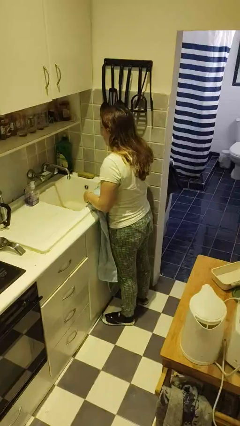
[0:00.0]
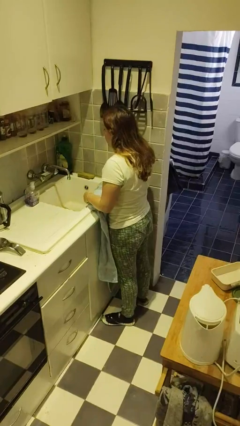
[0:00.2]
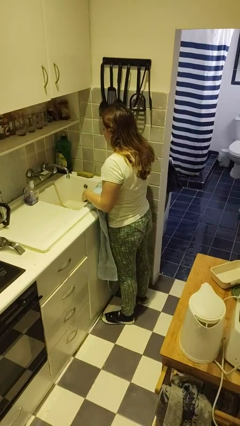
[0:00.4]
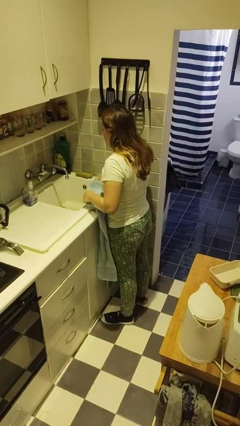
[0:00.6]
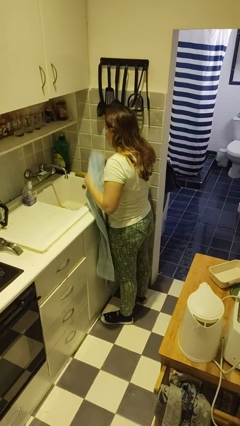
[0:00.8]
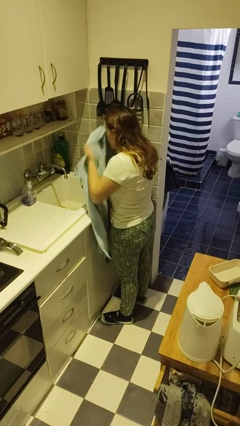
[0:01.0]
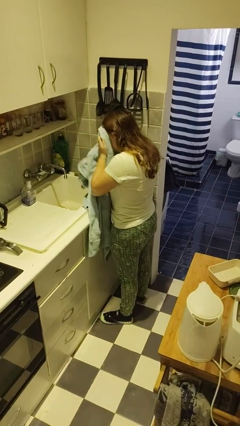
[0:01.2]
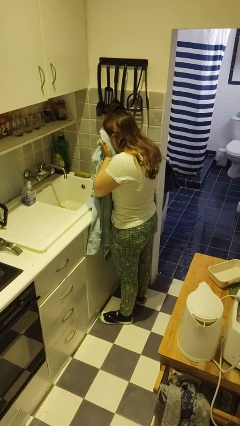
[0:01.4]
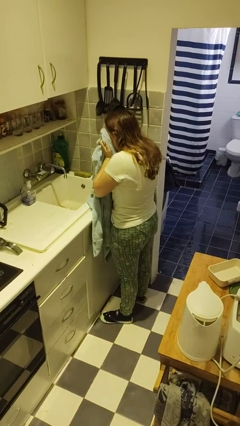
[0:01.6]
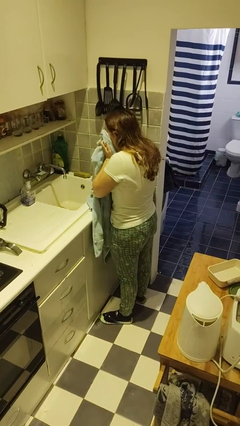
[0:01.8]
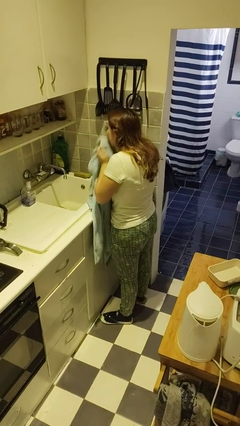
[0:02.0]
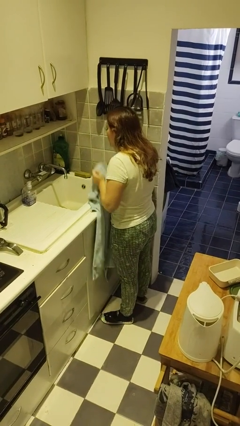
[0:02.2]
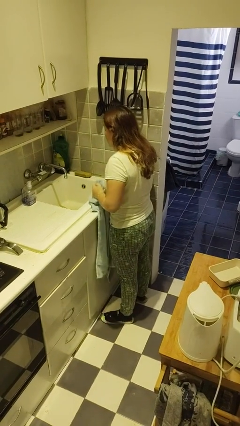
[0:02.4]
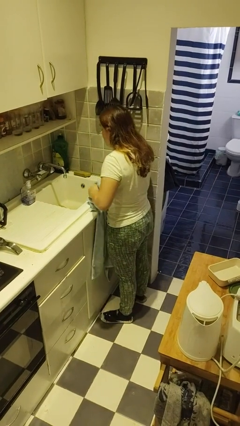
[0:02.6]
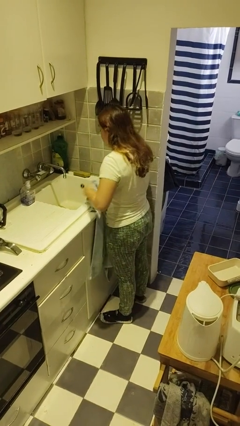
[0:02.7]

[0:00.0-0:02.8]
person dries face with towel

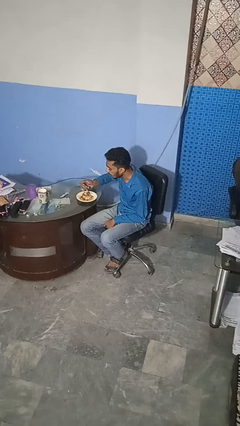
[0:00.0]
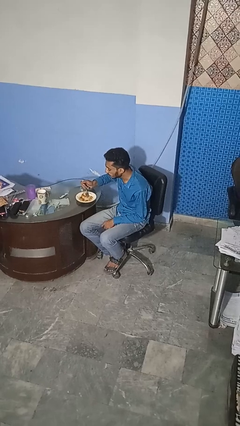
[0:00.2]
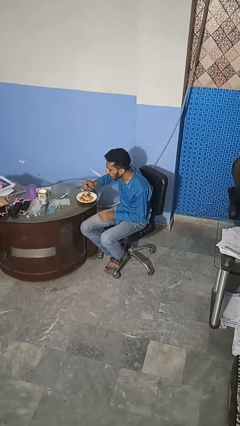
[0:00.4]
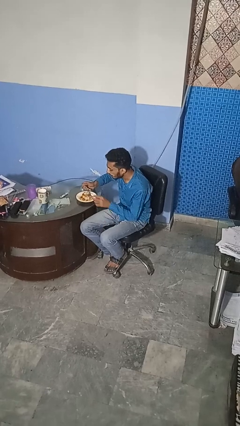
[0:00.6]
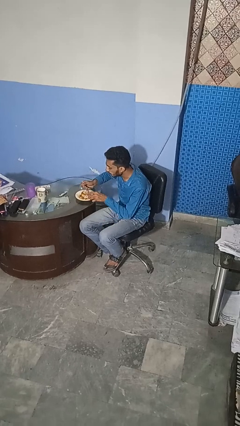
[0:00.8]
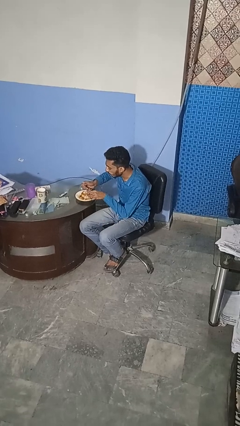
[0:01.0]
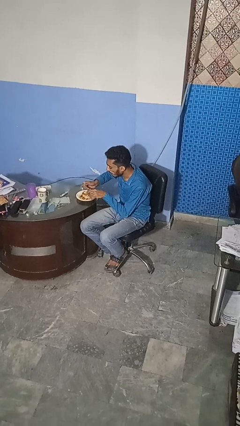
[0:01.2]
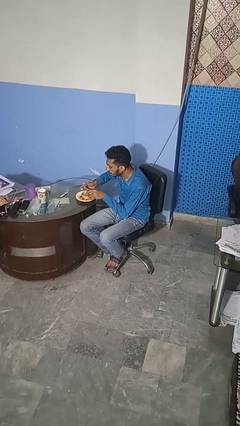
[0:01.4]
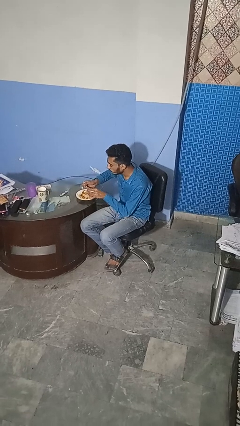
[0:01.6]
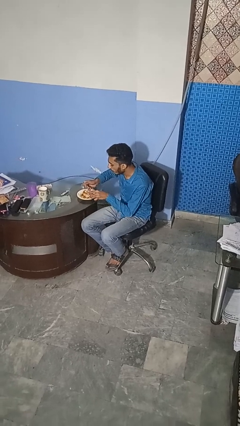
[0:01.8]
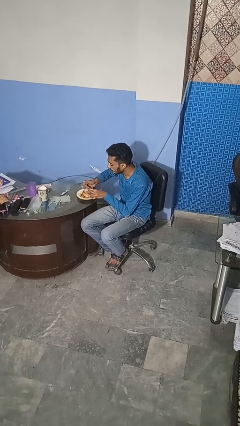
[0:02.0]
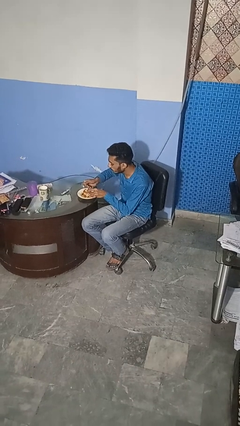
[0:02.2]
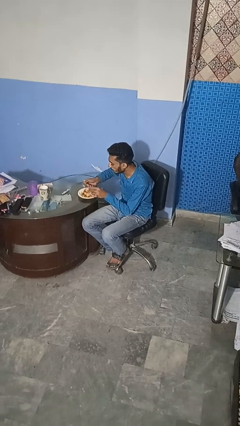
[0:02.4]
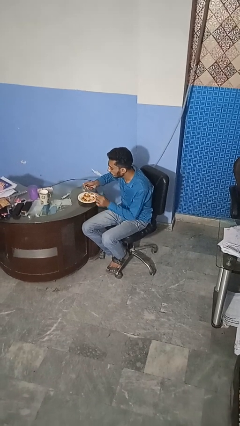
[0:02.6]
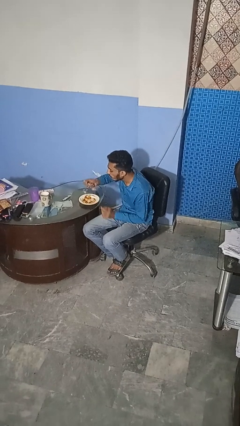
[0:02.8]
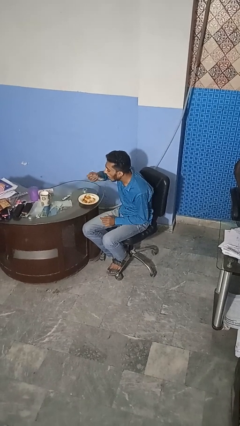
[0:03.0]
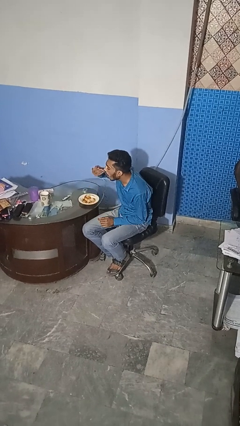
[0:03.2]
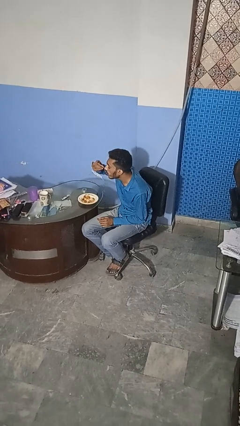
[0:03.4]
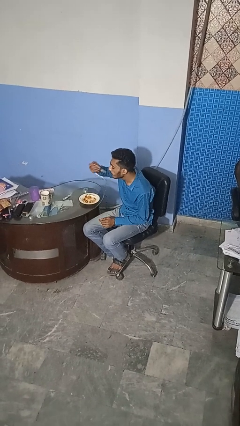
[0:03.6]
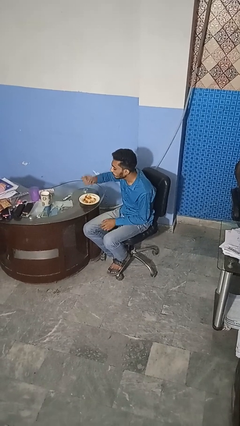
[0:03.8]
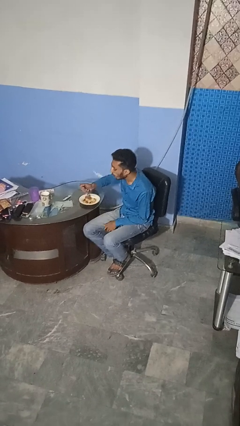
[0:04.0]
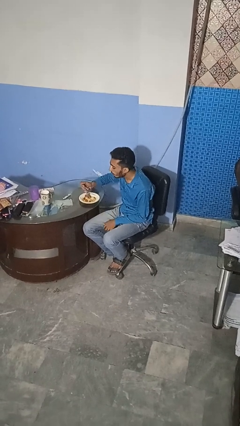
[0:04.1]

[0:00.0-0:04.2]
person eats with utensil

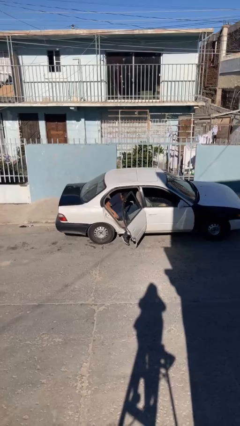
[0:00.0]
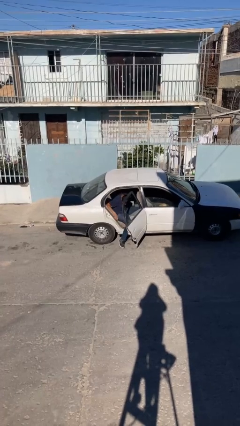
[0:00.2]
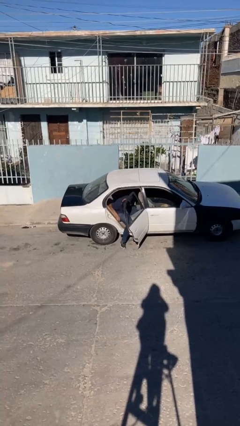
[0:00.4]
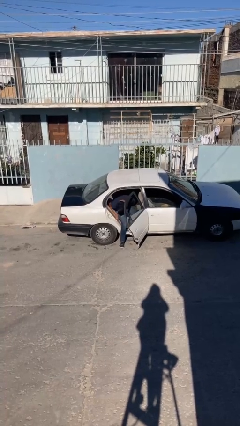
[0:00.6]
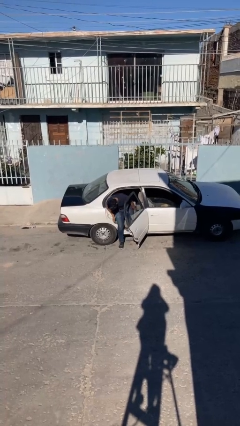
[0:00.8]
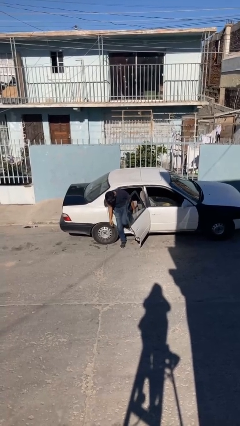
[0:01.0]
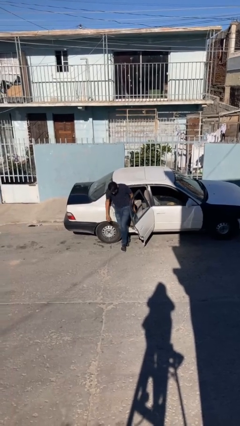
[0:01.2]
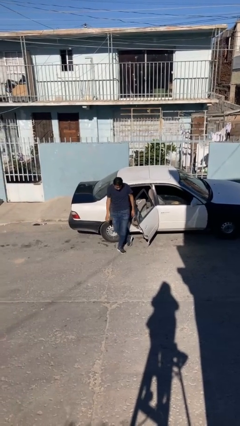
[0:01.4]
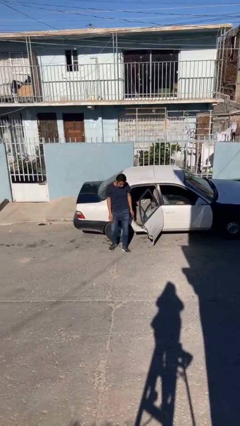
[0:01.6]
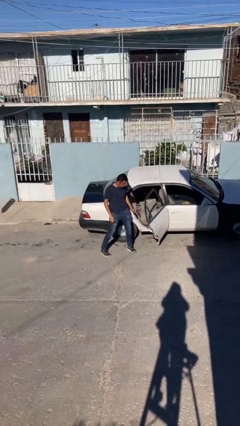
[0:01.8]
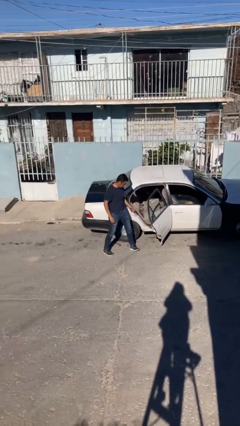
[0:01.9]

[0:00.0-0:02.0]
person exits car

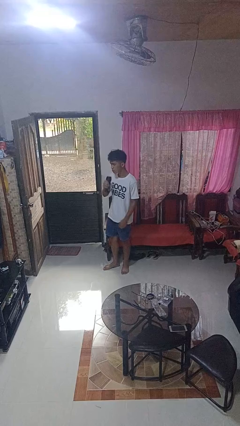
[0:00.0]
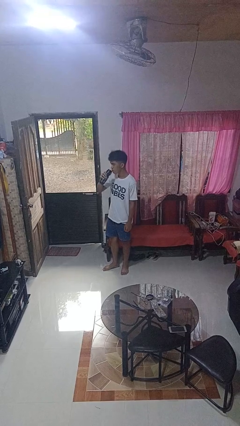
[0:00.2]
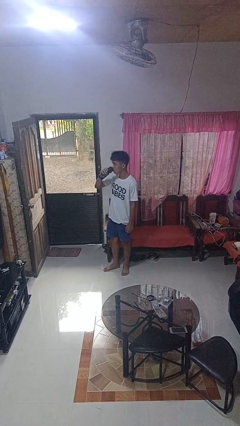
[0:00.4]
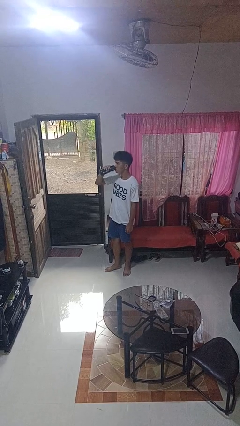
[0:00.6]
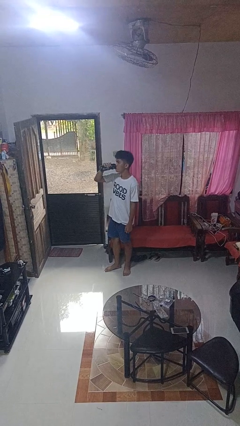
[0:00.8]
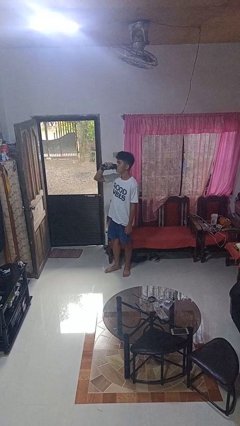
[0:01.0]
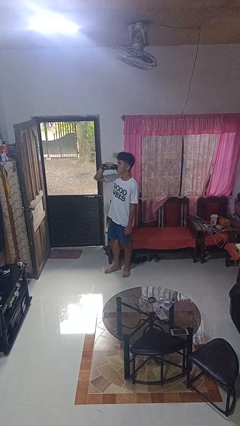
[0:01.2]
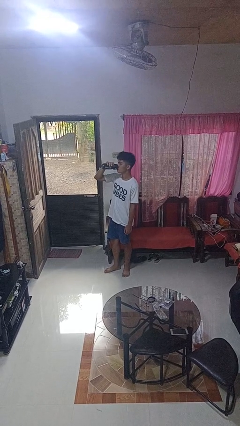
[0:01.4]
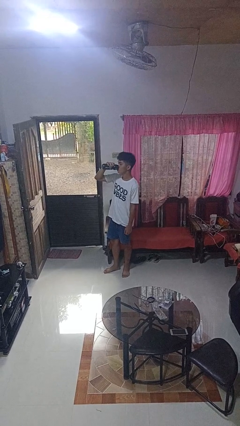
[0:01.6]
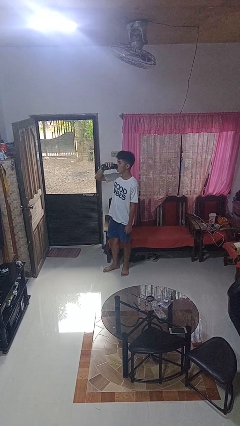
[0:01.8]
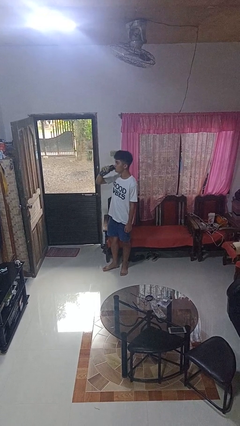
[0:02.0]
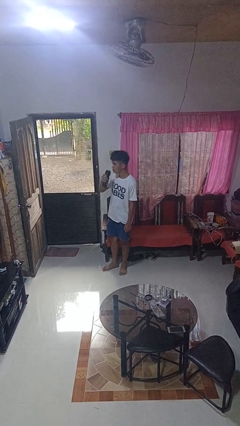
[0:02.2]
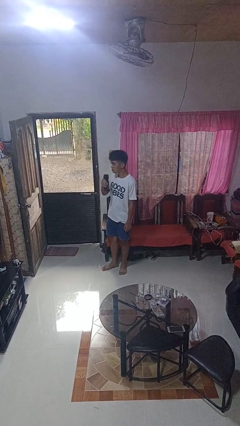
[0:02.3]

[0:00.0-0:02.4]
person drinks from bottle

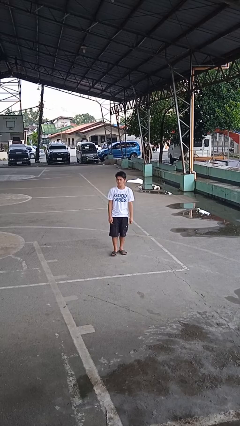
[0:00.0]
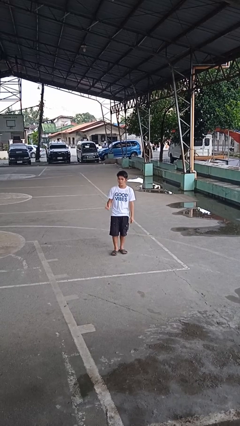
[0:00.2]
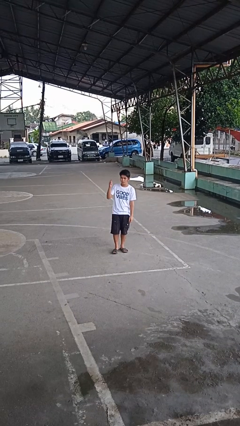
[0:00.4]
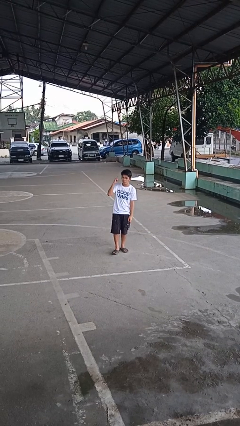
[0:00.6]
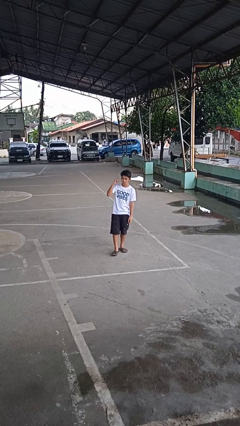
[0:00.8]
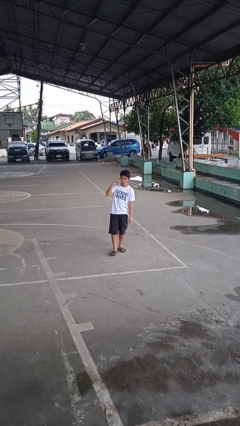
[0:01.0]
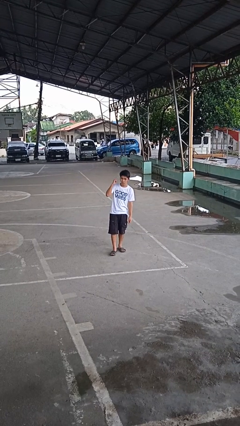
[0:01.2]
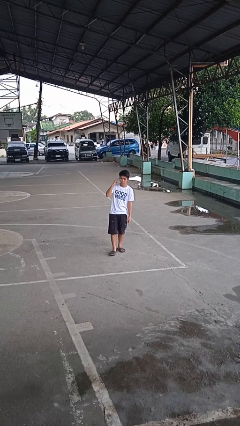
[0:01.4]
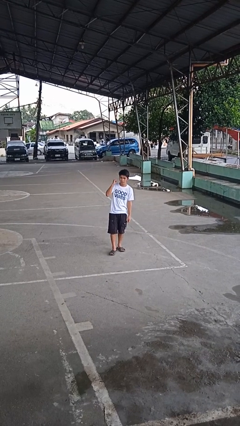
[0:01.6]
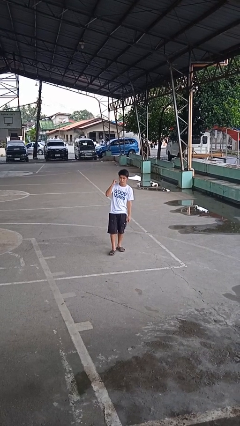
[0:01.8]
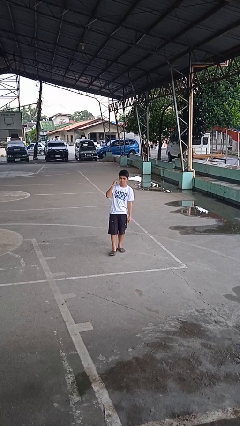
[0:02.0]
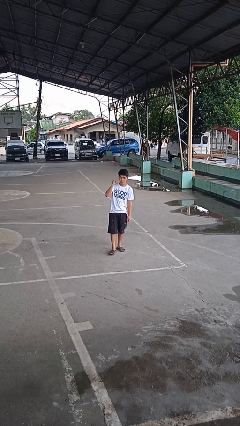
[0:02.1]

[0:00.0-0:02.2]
person gestures listen closely

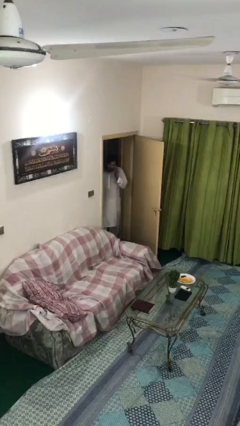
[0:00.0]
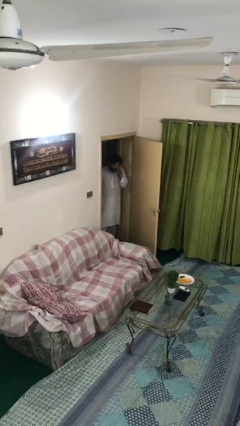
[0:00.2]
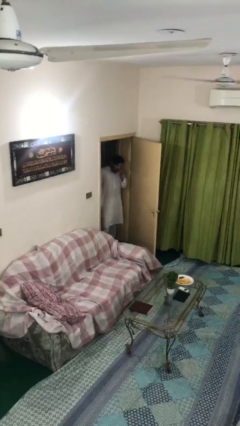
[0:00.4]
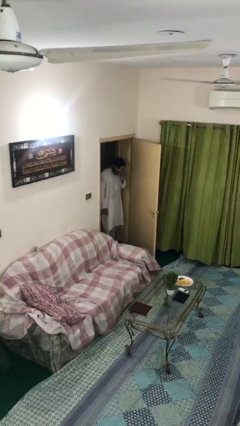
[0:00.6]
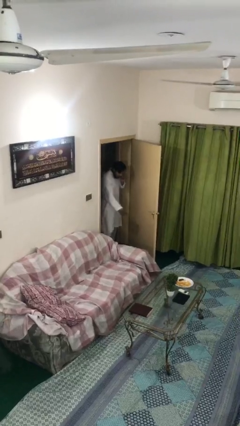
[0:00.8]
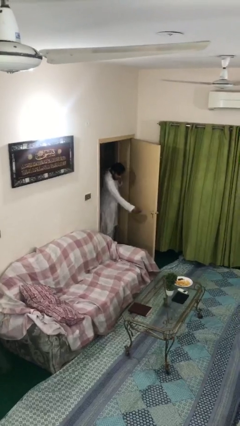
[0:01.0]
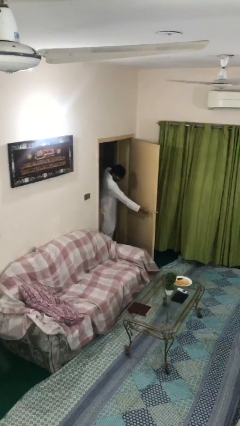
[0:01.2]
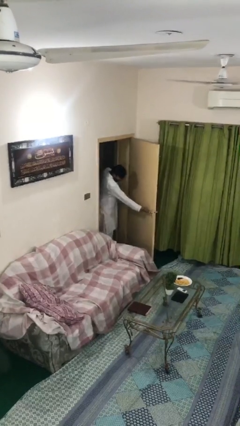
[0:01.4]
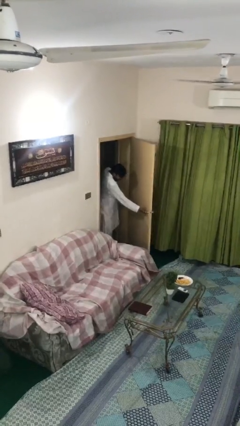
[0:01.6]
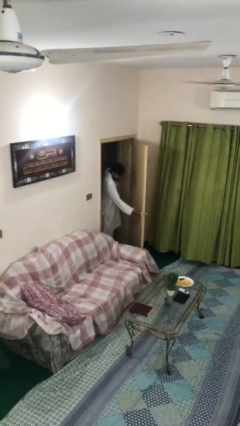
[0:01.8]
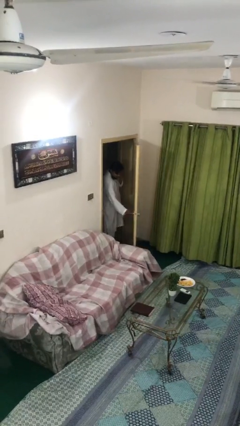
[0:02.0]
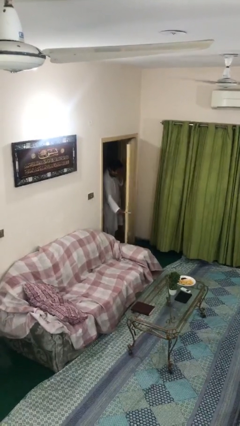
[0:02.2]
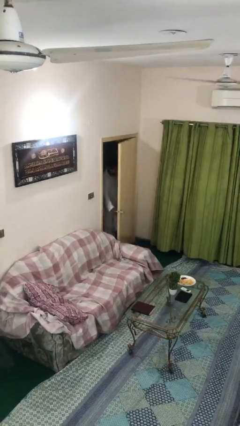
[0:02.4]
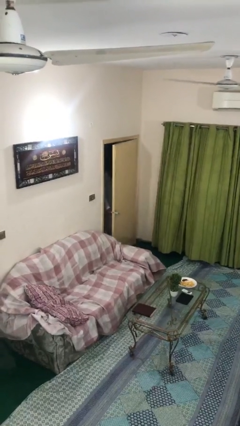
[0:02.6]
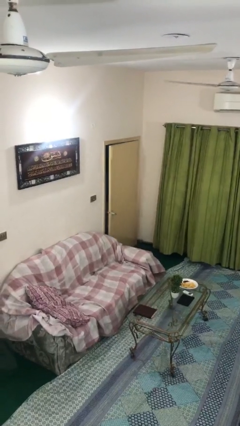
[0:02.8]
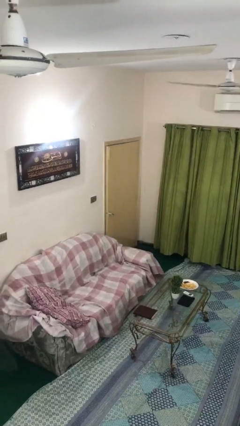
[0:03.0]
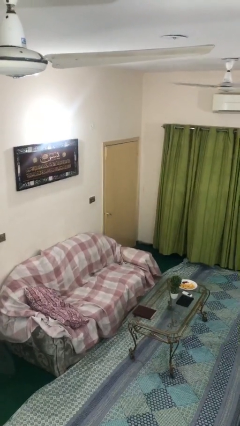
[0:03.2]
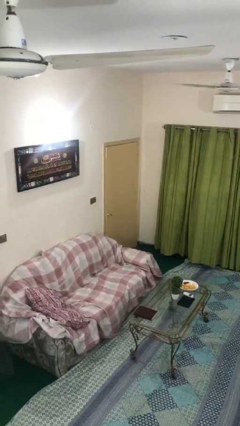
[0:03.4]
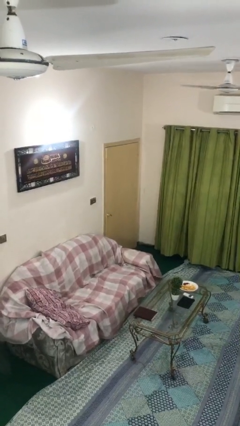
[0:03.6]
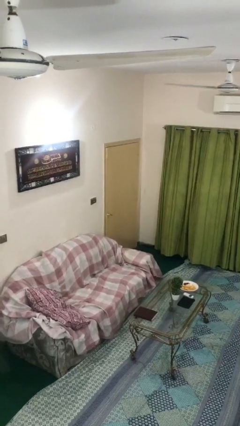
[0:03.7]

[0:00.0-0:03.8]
person closes facility door
